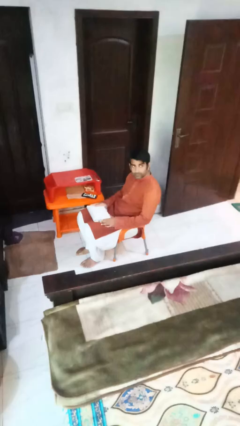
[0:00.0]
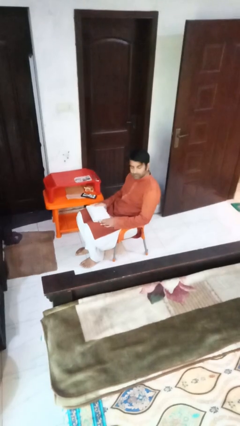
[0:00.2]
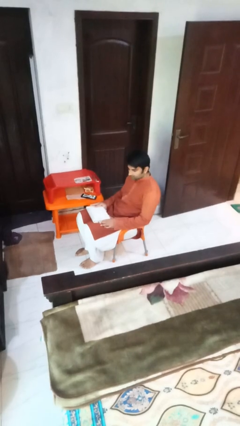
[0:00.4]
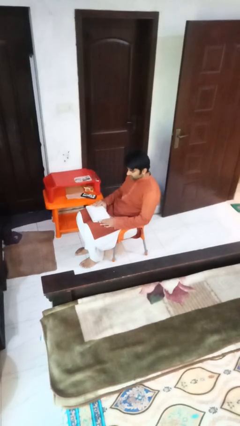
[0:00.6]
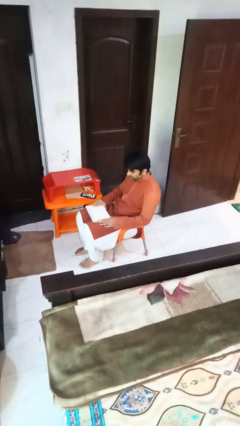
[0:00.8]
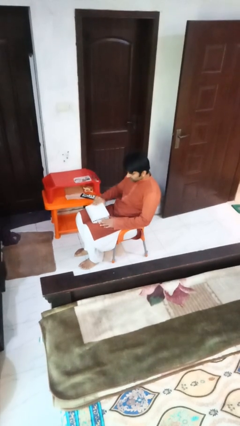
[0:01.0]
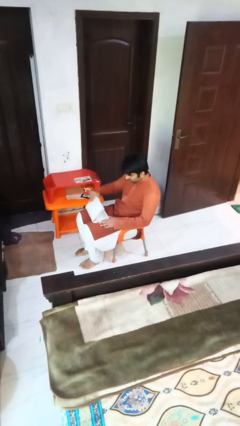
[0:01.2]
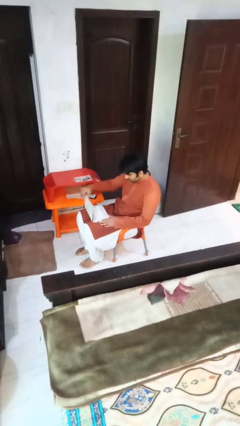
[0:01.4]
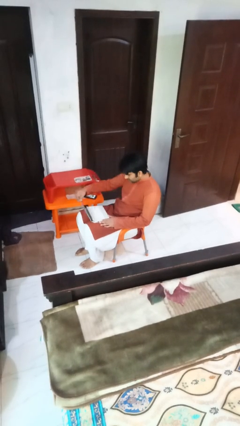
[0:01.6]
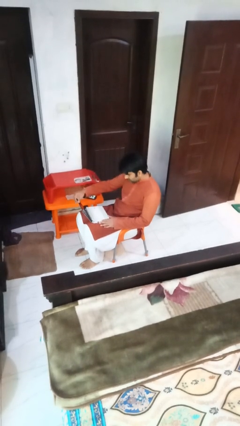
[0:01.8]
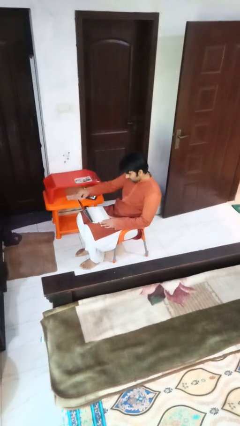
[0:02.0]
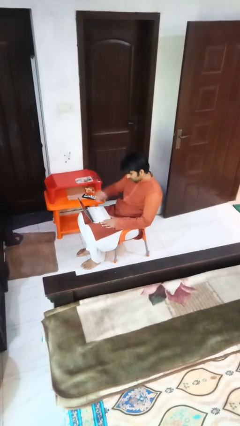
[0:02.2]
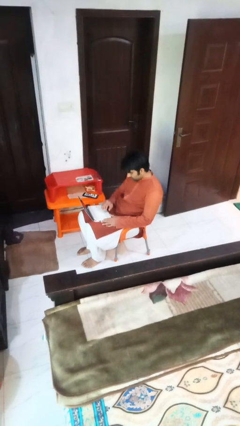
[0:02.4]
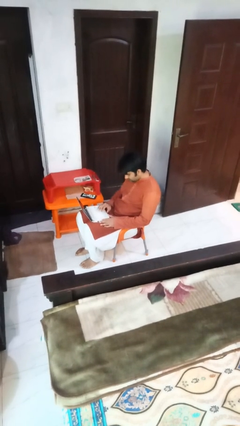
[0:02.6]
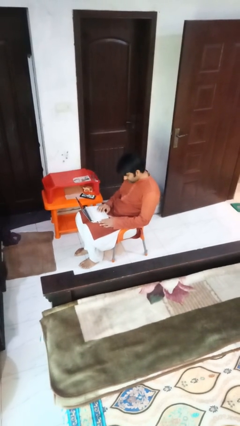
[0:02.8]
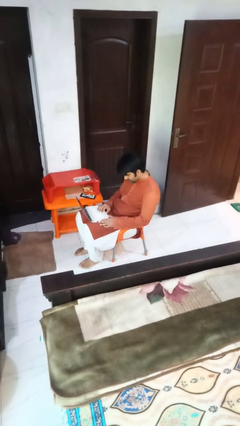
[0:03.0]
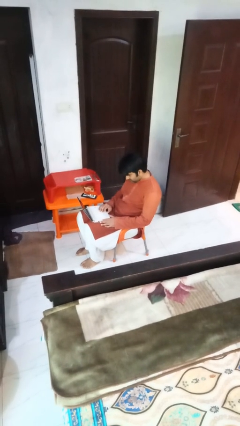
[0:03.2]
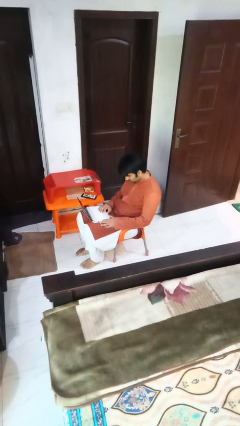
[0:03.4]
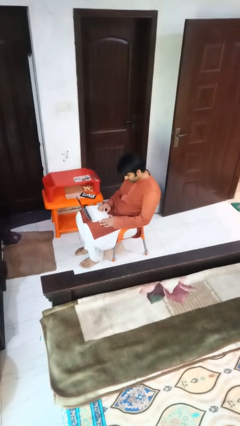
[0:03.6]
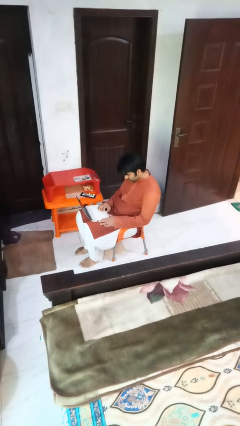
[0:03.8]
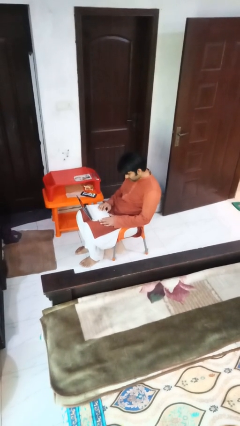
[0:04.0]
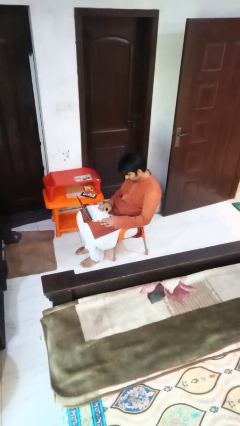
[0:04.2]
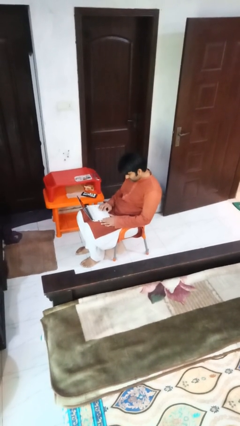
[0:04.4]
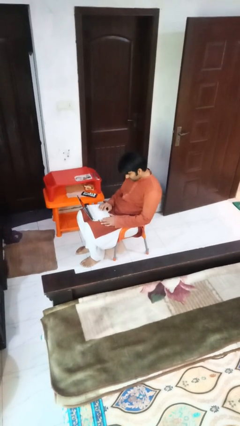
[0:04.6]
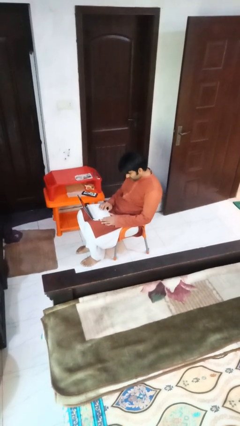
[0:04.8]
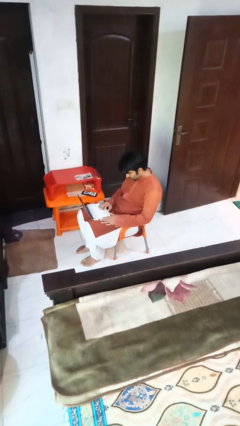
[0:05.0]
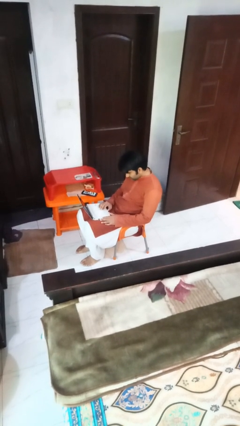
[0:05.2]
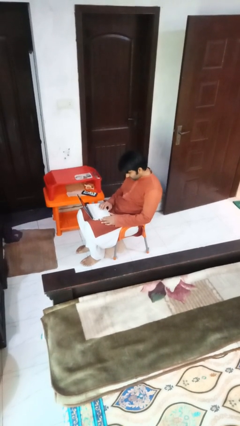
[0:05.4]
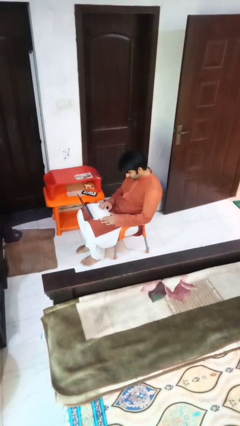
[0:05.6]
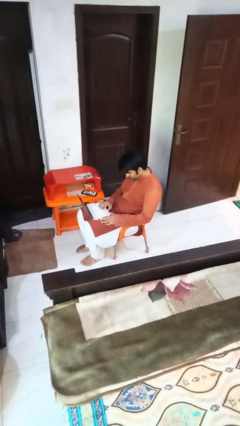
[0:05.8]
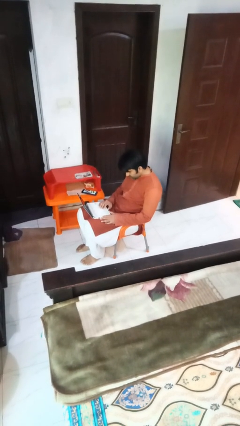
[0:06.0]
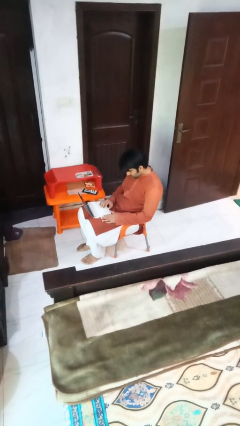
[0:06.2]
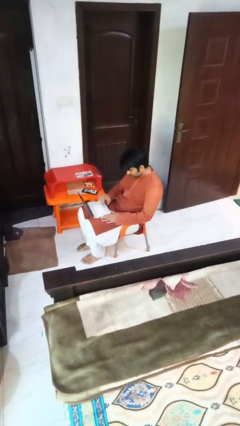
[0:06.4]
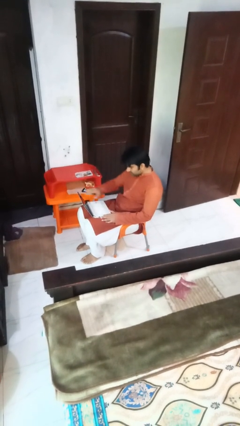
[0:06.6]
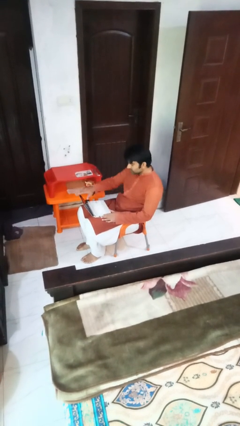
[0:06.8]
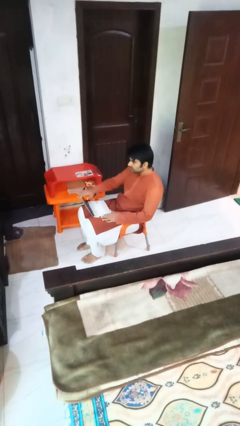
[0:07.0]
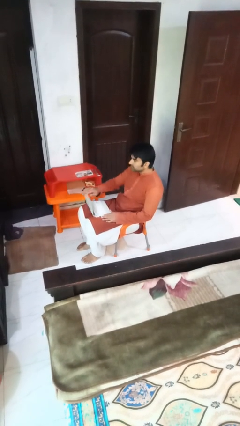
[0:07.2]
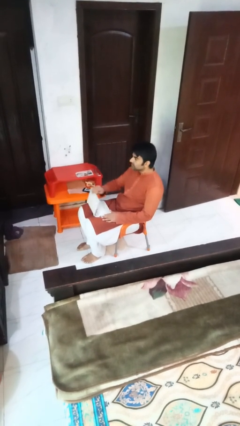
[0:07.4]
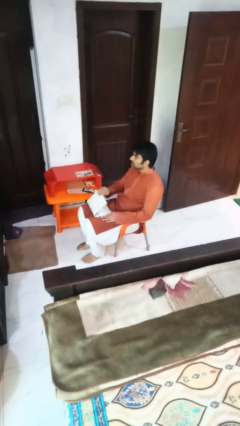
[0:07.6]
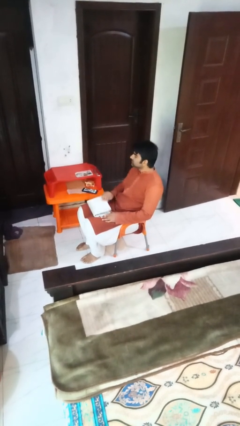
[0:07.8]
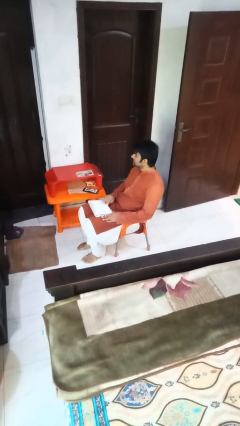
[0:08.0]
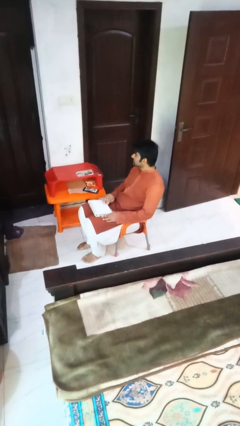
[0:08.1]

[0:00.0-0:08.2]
person interacts with laptop

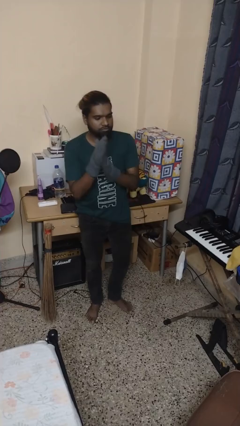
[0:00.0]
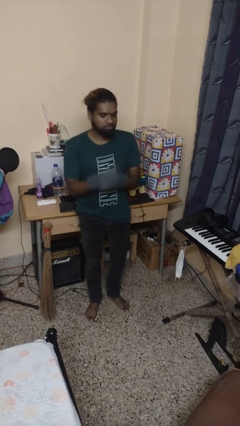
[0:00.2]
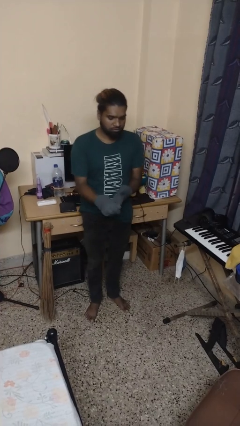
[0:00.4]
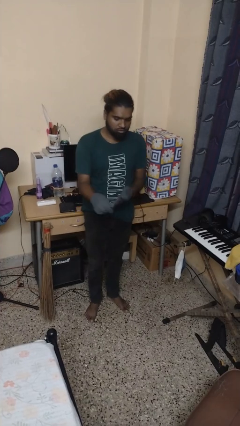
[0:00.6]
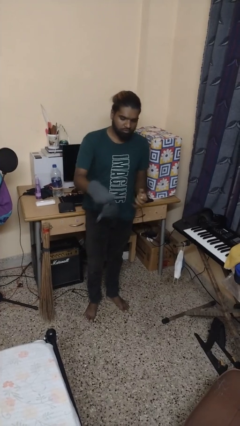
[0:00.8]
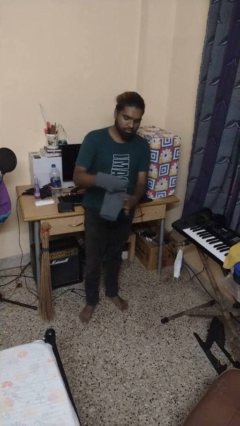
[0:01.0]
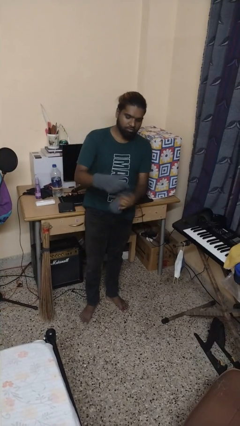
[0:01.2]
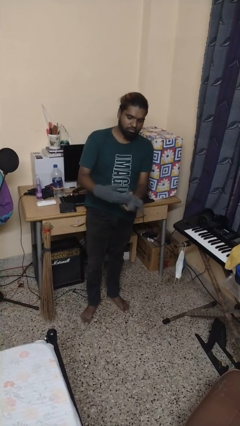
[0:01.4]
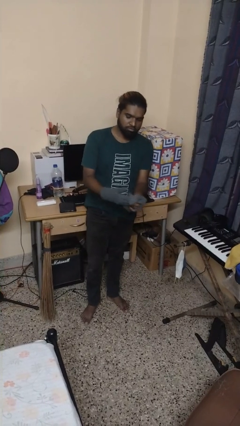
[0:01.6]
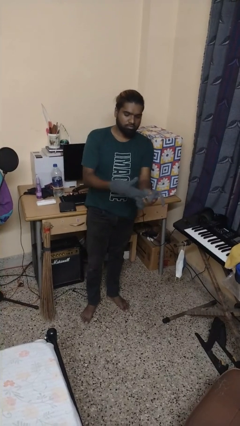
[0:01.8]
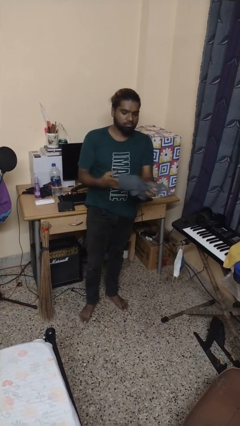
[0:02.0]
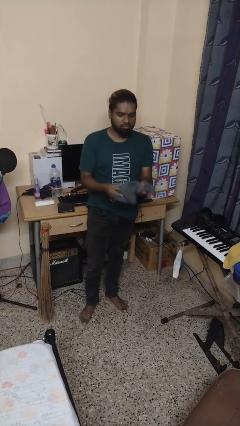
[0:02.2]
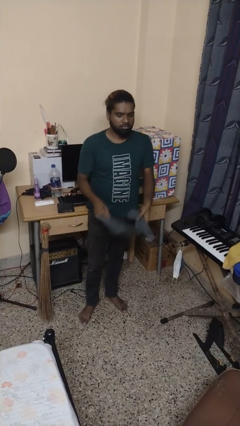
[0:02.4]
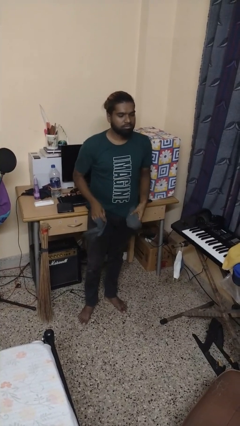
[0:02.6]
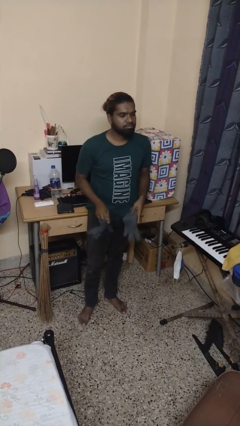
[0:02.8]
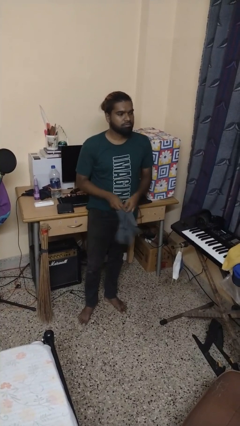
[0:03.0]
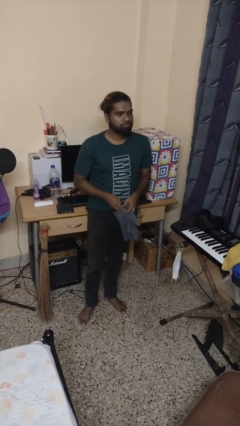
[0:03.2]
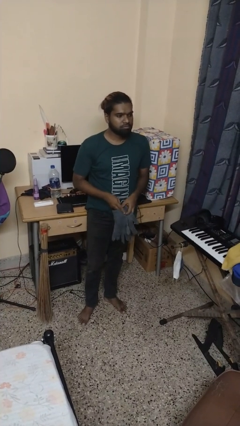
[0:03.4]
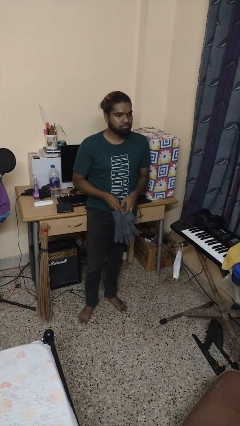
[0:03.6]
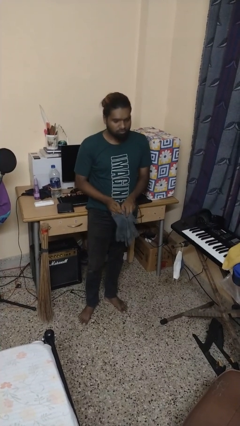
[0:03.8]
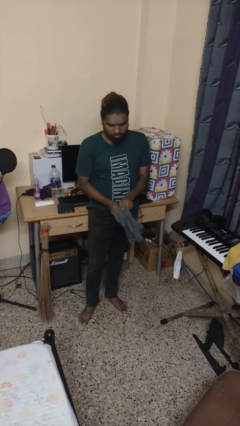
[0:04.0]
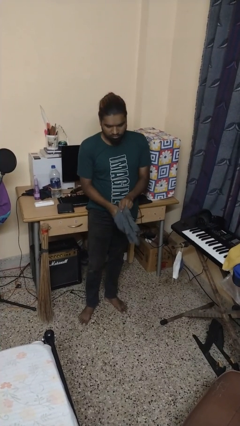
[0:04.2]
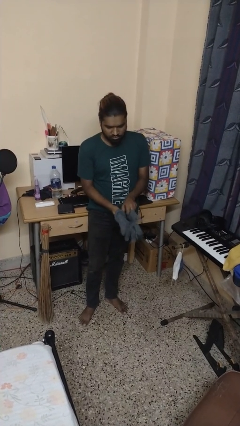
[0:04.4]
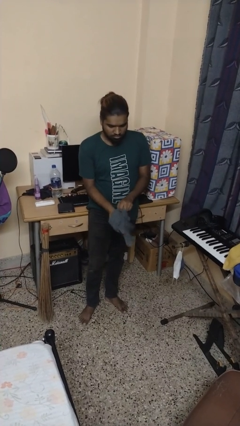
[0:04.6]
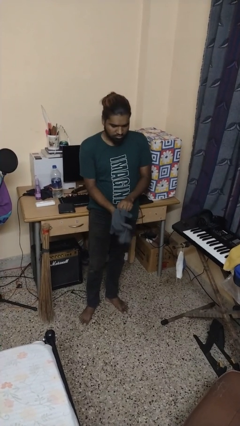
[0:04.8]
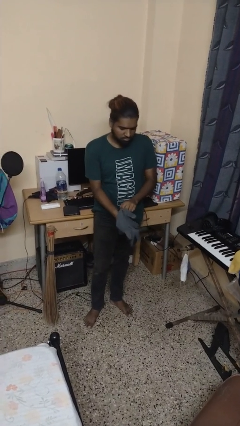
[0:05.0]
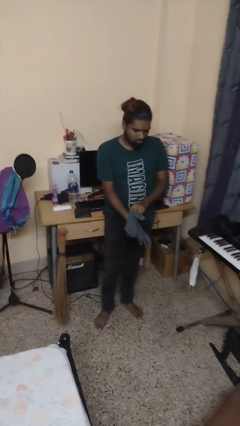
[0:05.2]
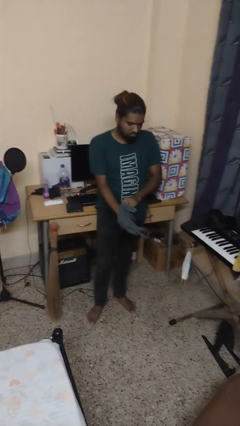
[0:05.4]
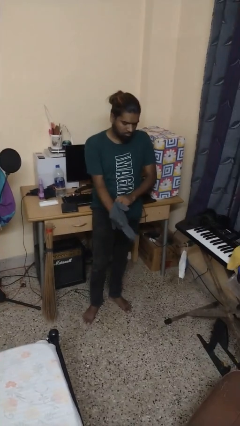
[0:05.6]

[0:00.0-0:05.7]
person takes off gloves

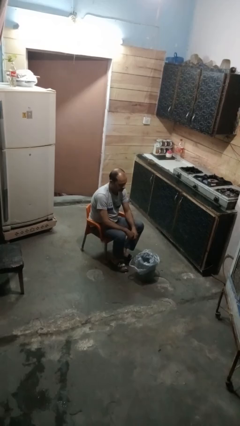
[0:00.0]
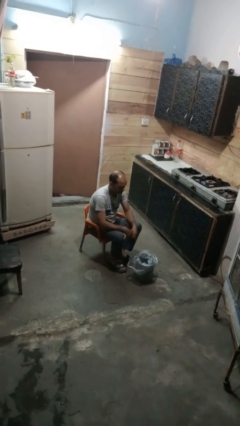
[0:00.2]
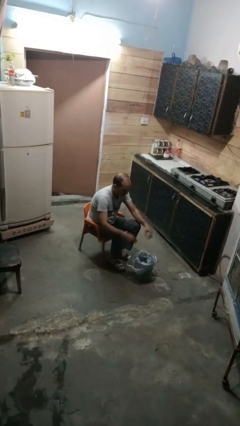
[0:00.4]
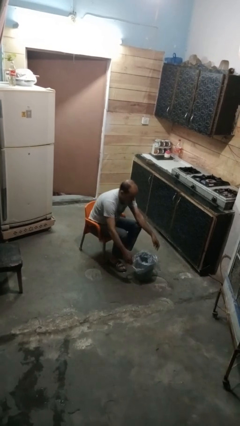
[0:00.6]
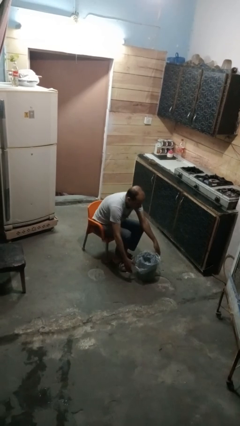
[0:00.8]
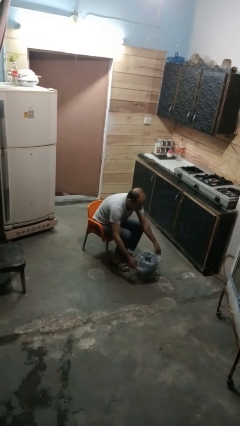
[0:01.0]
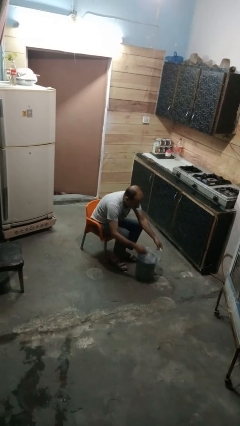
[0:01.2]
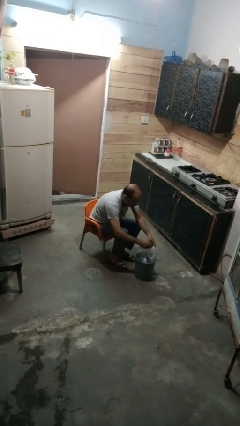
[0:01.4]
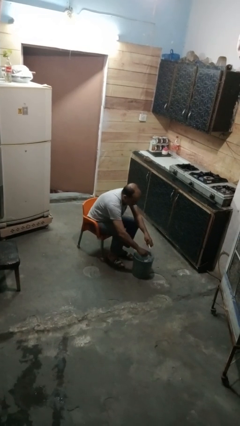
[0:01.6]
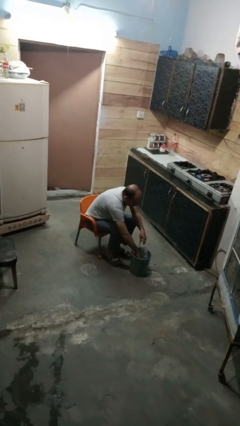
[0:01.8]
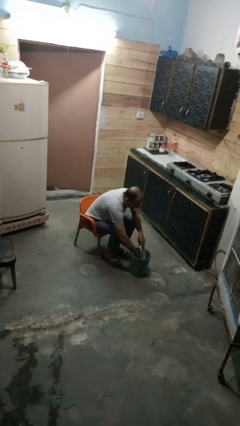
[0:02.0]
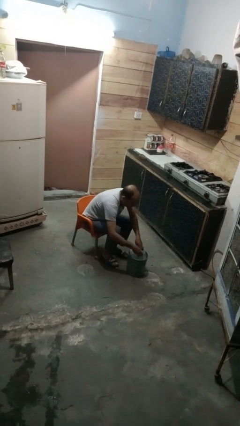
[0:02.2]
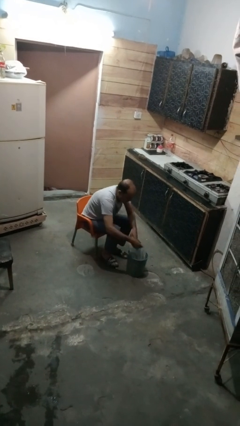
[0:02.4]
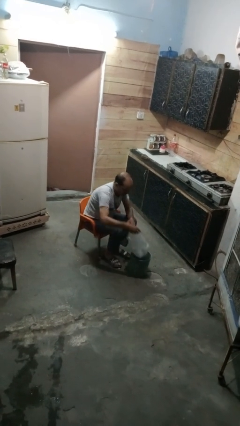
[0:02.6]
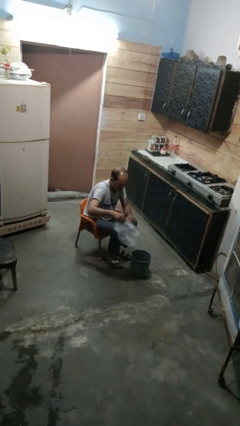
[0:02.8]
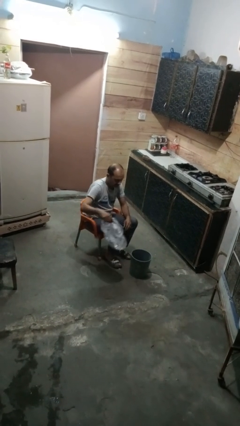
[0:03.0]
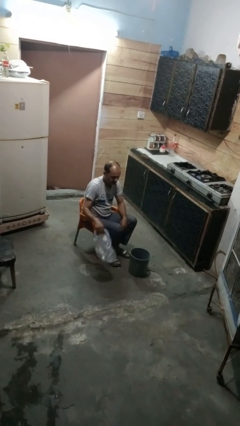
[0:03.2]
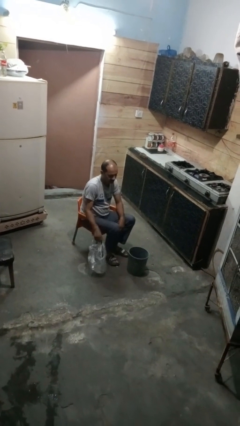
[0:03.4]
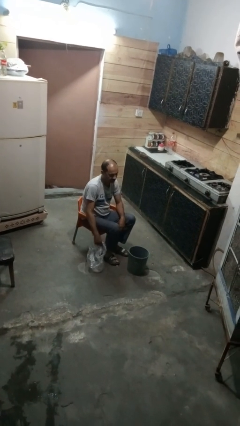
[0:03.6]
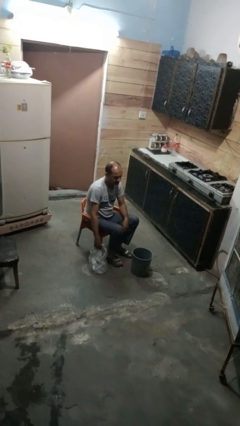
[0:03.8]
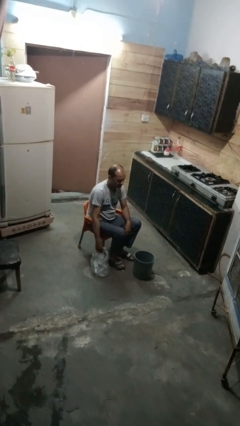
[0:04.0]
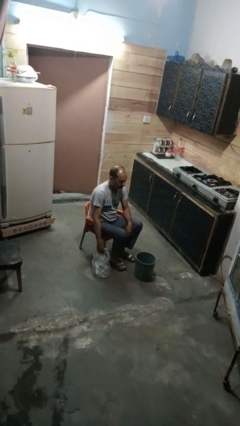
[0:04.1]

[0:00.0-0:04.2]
person removes trashbag from trashcan
